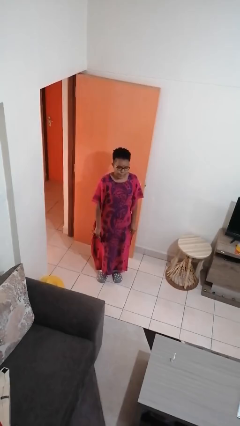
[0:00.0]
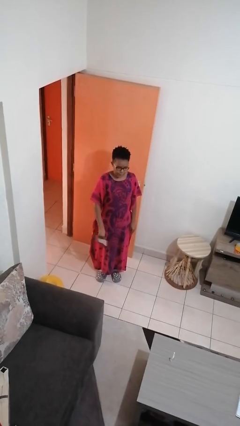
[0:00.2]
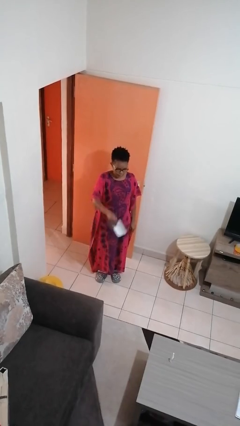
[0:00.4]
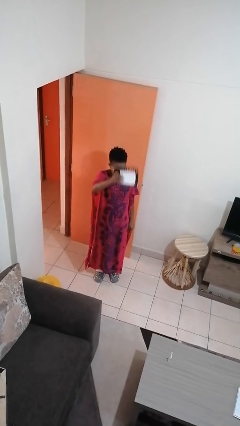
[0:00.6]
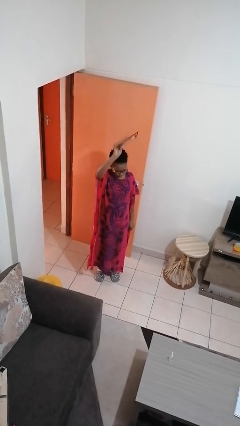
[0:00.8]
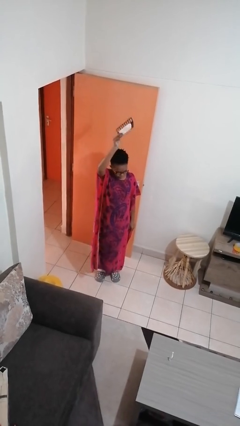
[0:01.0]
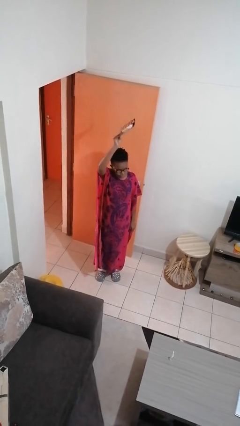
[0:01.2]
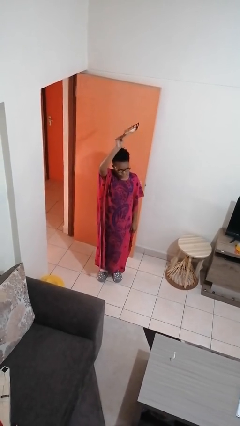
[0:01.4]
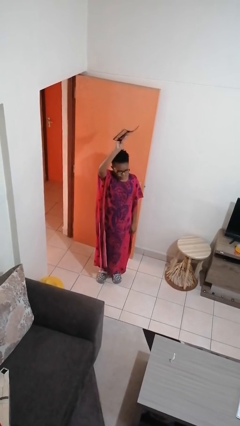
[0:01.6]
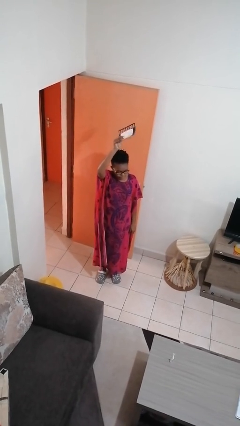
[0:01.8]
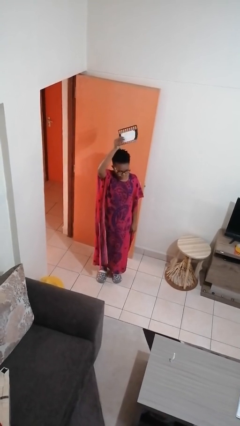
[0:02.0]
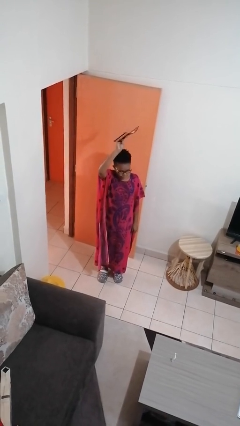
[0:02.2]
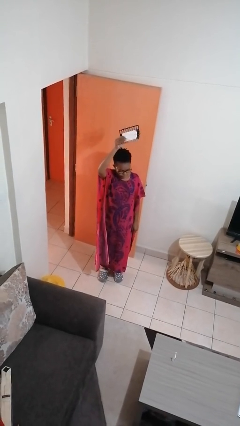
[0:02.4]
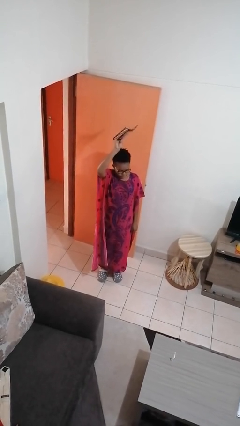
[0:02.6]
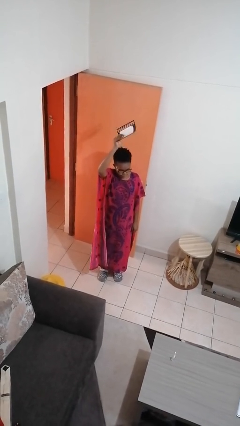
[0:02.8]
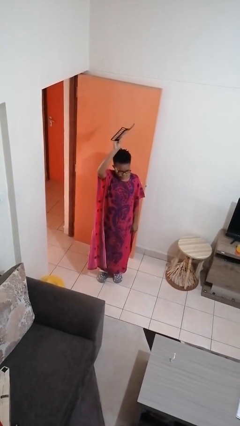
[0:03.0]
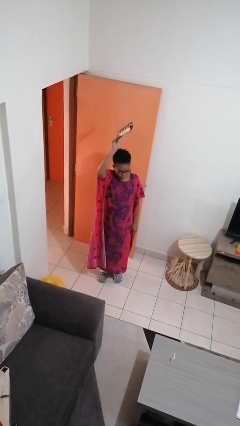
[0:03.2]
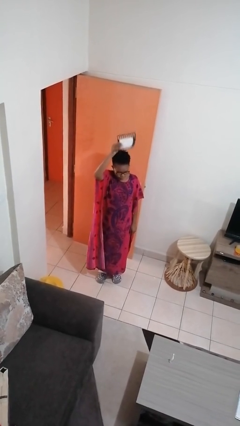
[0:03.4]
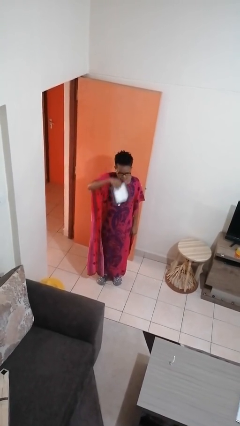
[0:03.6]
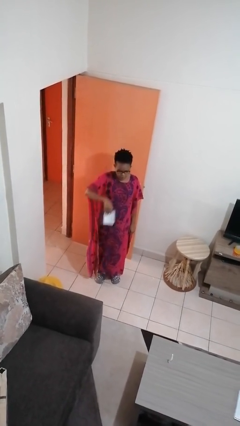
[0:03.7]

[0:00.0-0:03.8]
person holds object above head

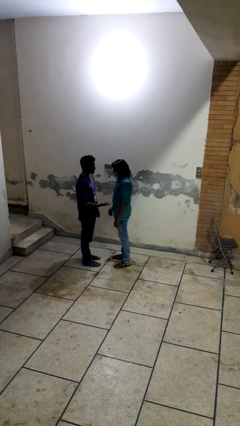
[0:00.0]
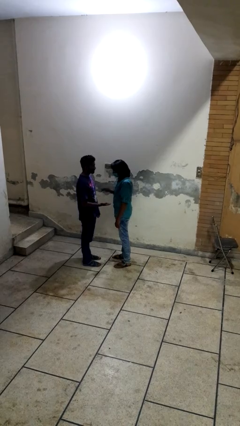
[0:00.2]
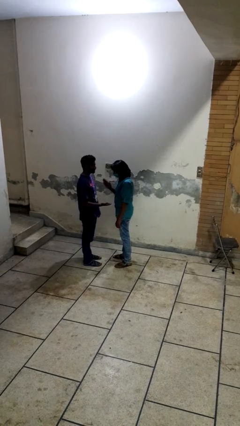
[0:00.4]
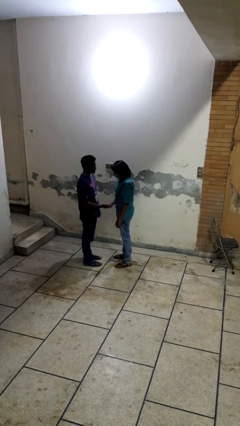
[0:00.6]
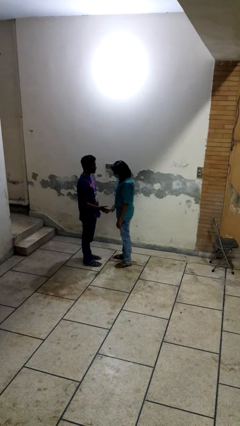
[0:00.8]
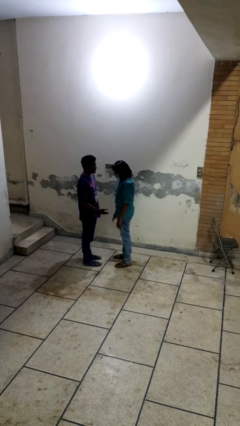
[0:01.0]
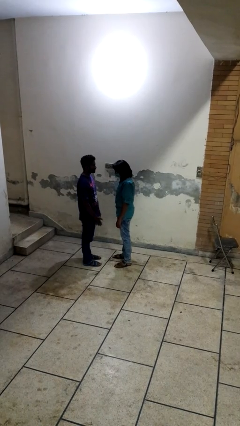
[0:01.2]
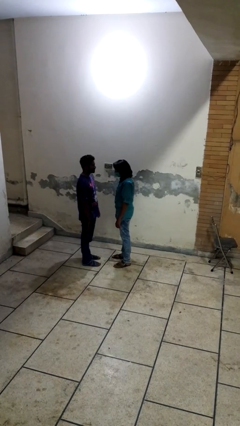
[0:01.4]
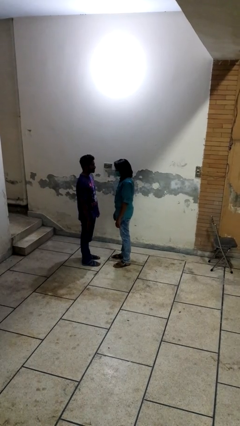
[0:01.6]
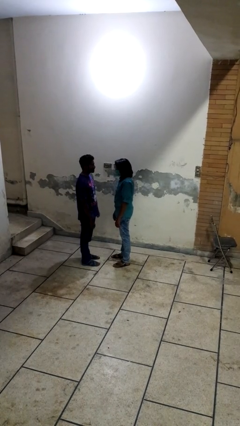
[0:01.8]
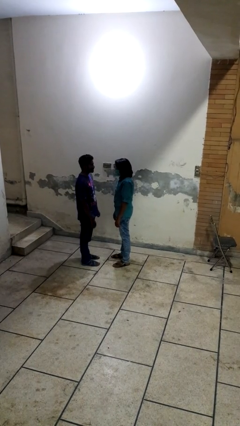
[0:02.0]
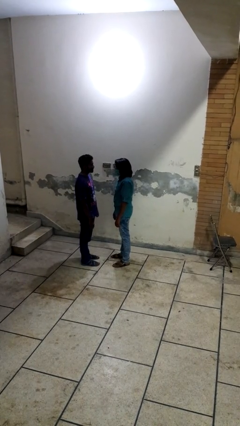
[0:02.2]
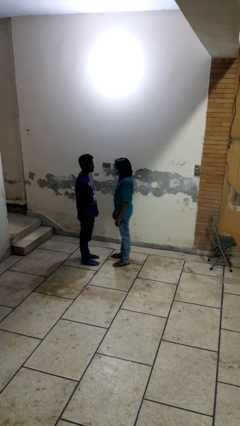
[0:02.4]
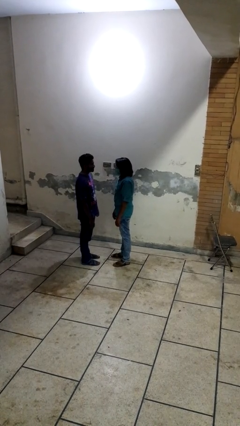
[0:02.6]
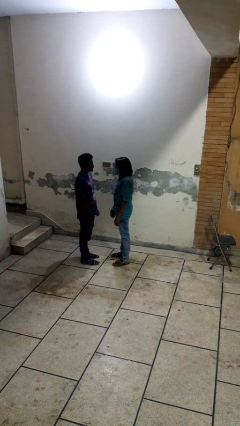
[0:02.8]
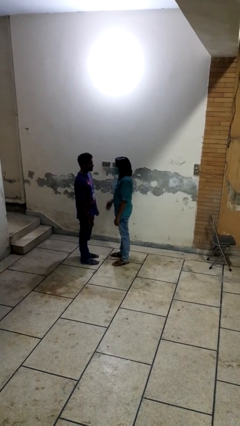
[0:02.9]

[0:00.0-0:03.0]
person highfives hand

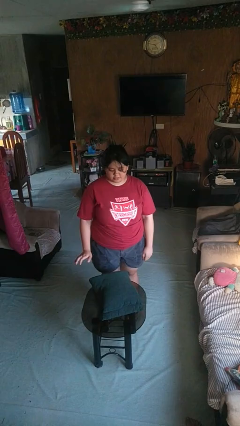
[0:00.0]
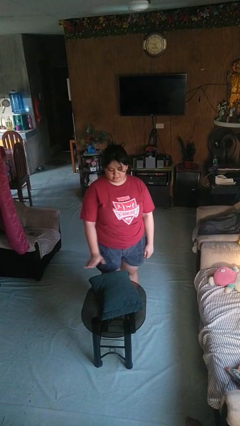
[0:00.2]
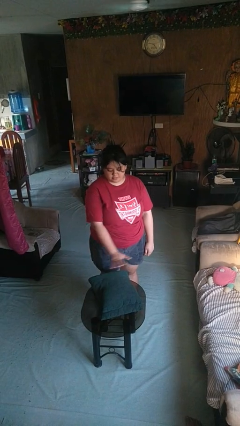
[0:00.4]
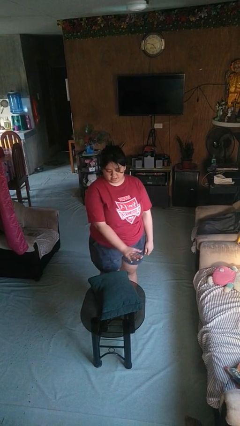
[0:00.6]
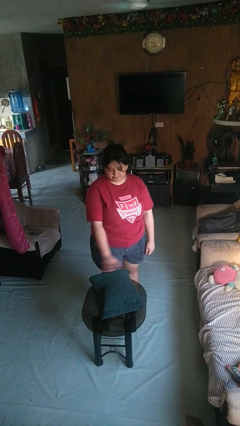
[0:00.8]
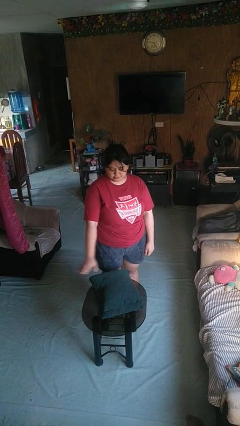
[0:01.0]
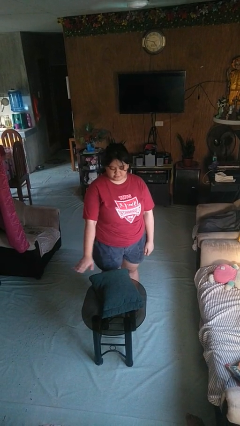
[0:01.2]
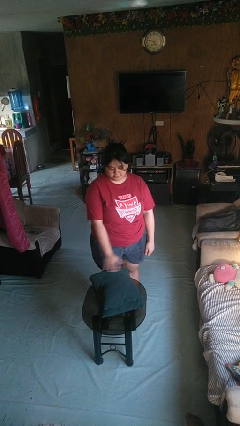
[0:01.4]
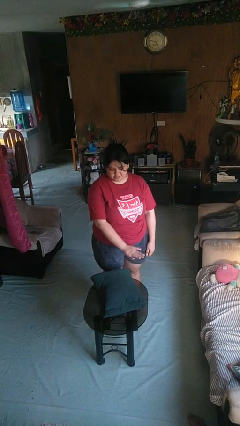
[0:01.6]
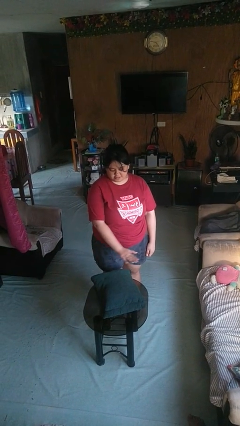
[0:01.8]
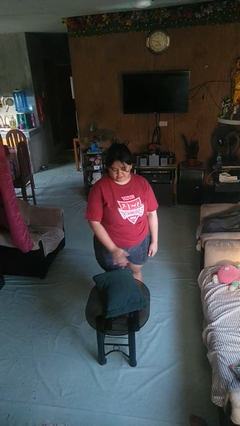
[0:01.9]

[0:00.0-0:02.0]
person waves hand over object

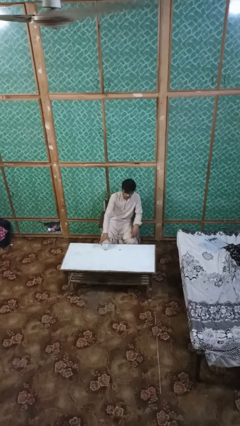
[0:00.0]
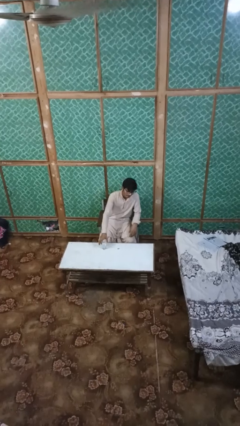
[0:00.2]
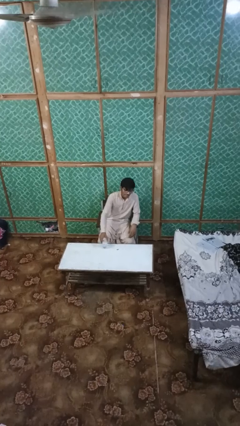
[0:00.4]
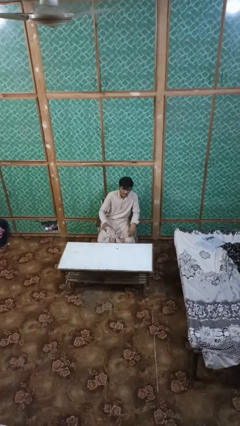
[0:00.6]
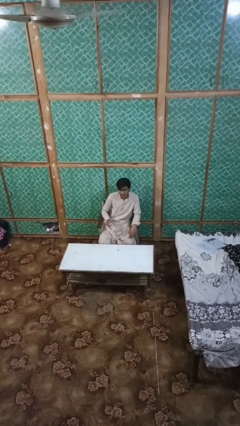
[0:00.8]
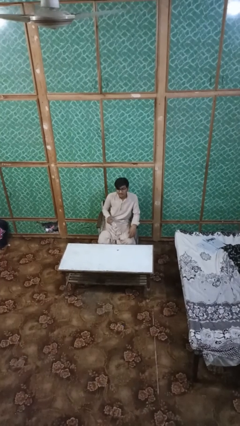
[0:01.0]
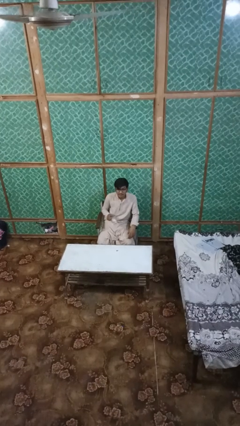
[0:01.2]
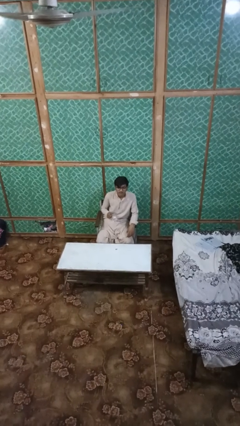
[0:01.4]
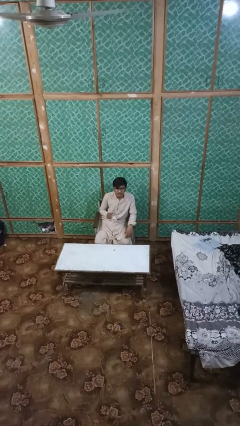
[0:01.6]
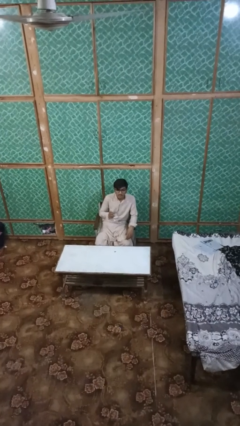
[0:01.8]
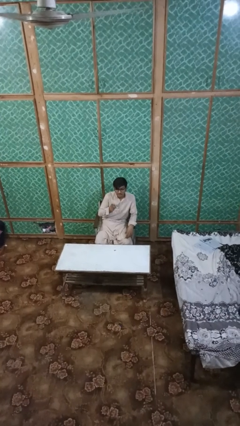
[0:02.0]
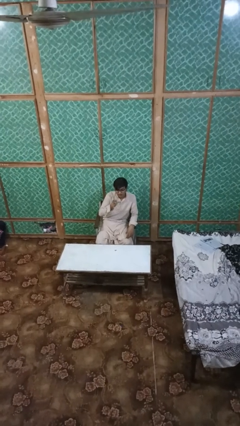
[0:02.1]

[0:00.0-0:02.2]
person picks up object from table

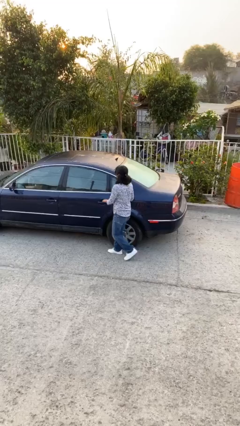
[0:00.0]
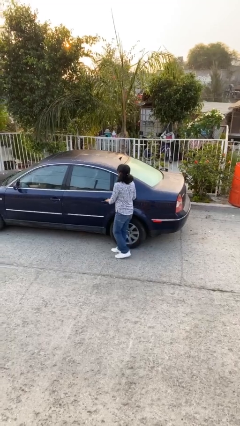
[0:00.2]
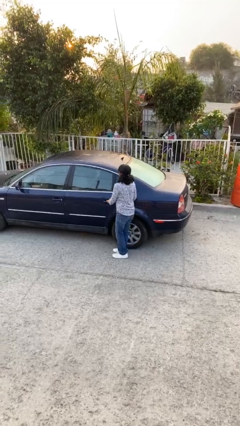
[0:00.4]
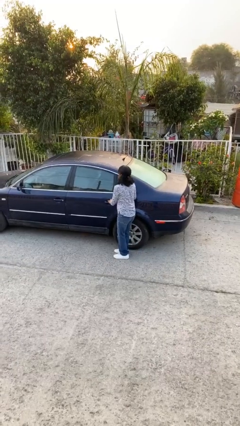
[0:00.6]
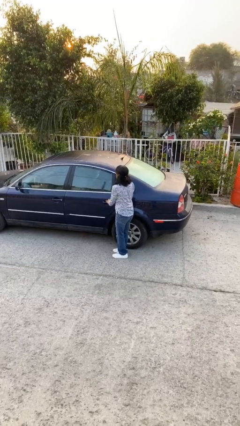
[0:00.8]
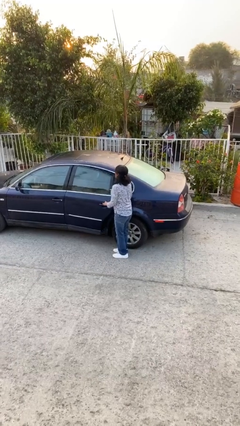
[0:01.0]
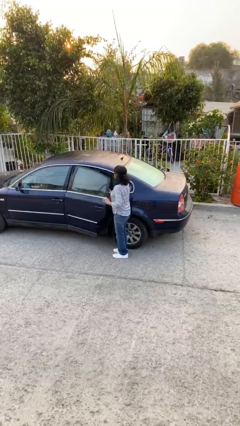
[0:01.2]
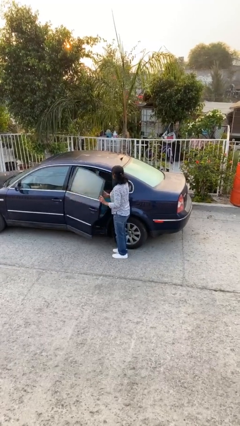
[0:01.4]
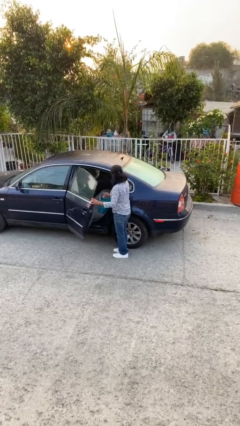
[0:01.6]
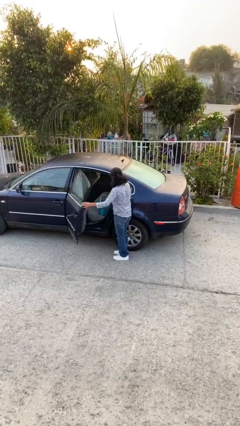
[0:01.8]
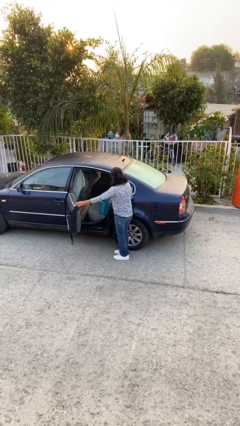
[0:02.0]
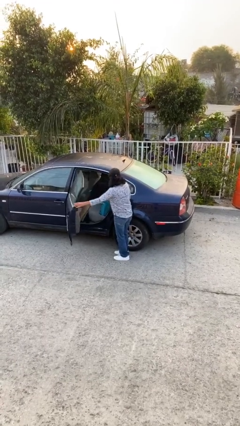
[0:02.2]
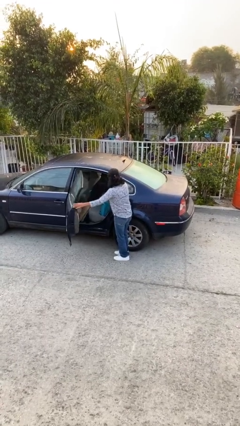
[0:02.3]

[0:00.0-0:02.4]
person opens car door

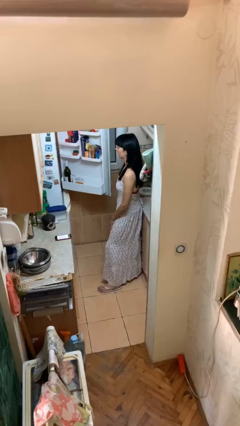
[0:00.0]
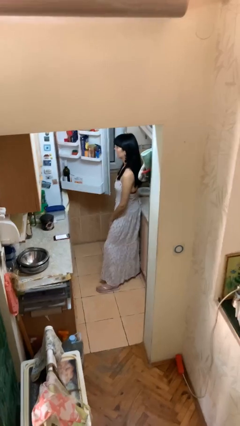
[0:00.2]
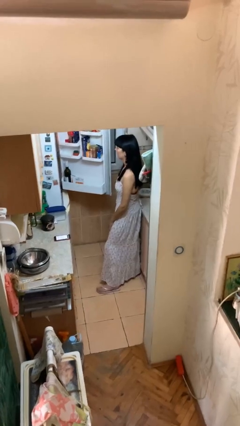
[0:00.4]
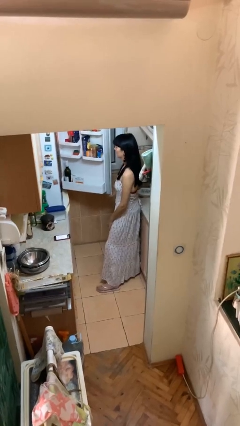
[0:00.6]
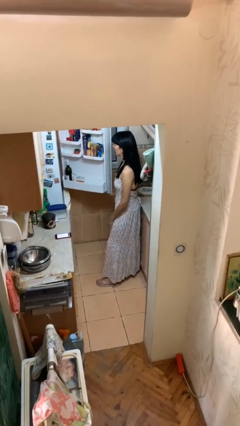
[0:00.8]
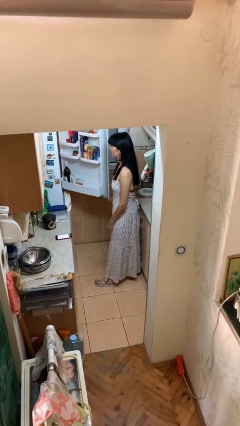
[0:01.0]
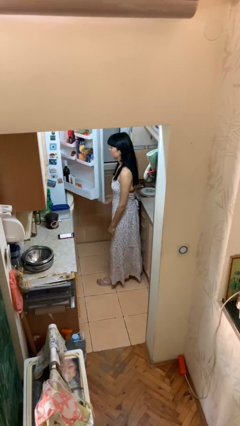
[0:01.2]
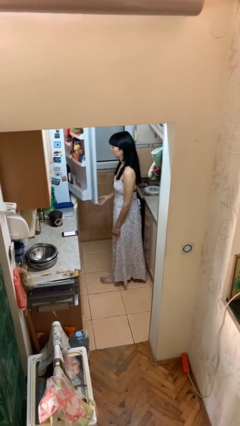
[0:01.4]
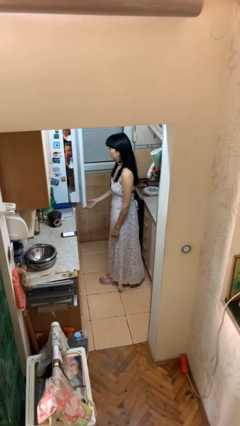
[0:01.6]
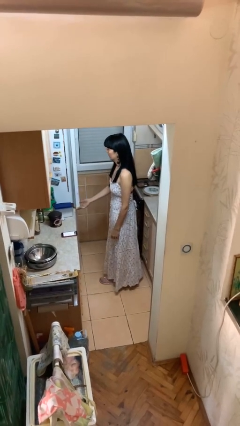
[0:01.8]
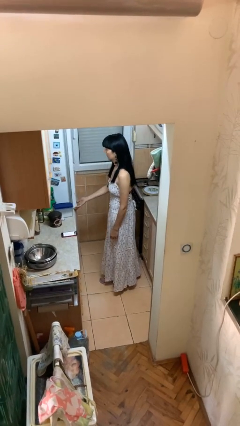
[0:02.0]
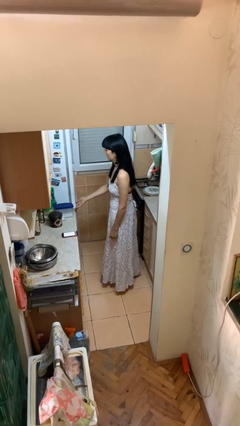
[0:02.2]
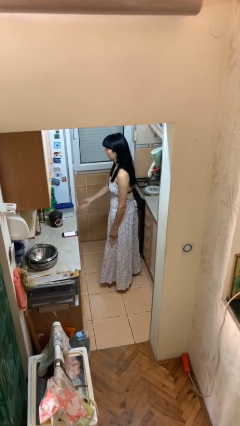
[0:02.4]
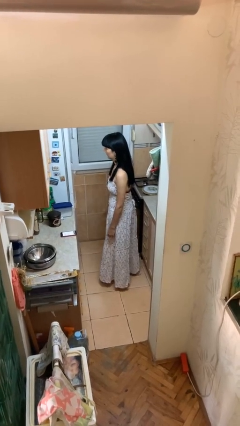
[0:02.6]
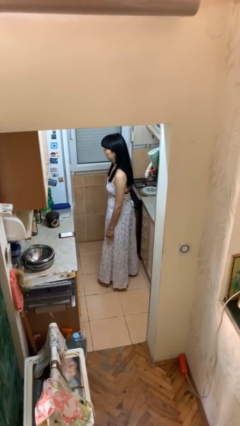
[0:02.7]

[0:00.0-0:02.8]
person closes refrigerator

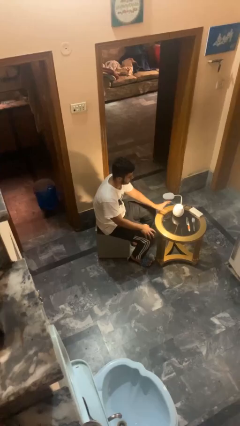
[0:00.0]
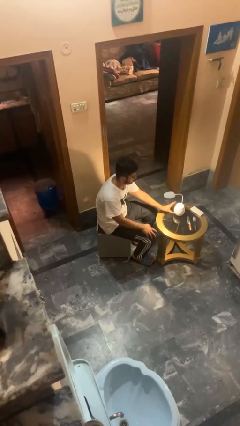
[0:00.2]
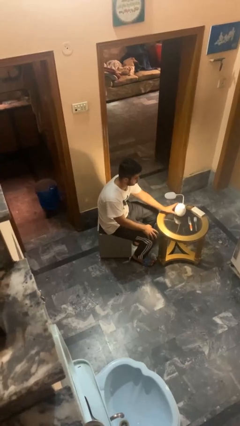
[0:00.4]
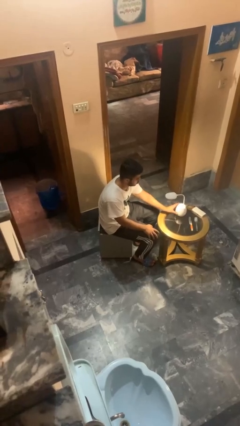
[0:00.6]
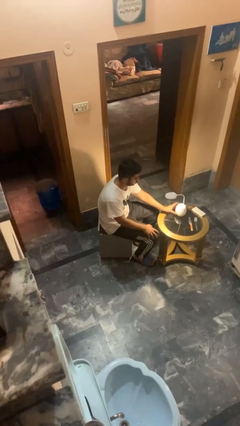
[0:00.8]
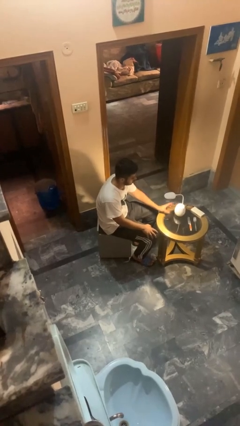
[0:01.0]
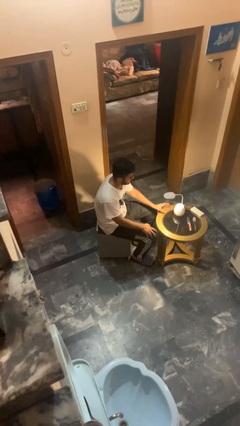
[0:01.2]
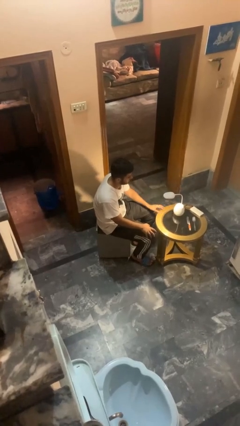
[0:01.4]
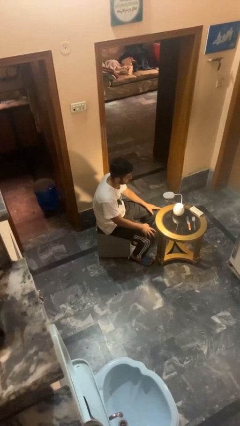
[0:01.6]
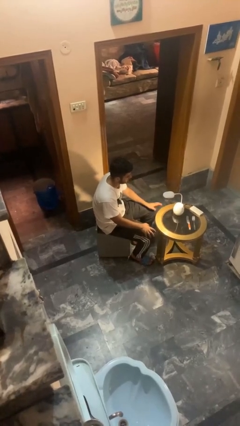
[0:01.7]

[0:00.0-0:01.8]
person turns off lamp
